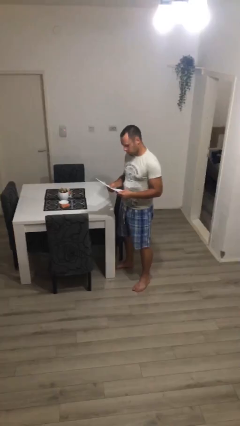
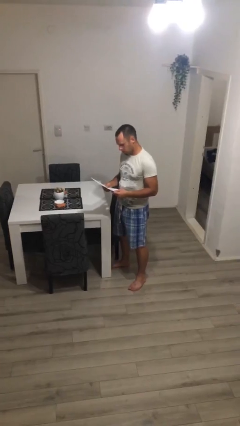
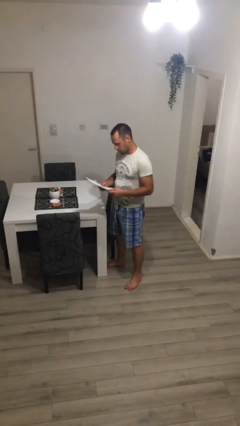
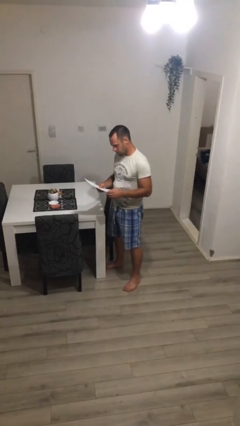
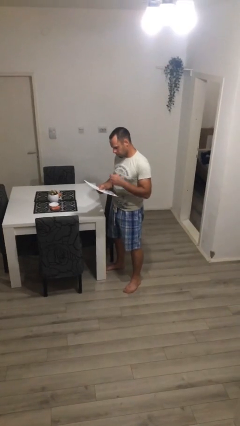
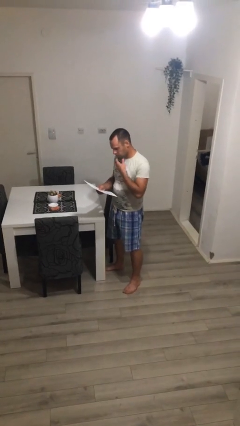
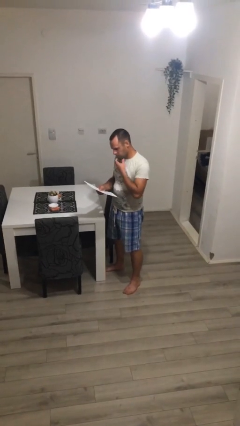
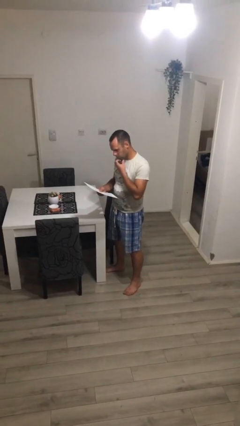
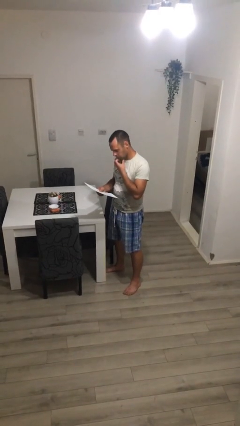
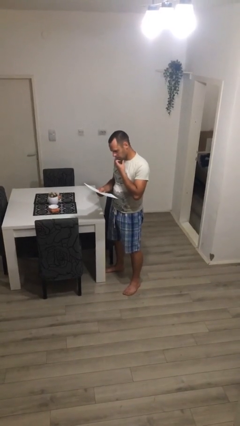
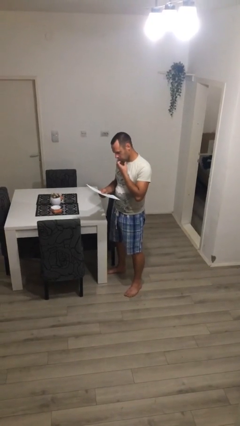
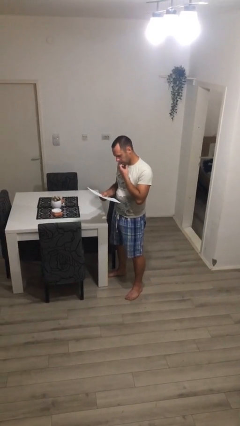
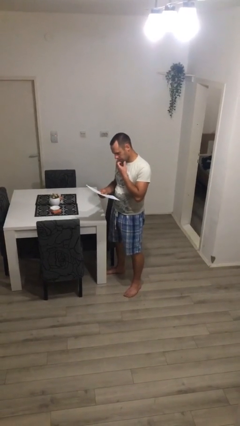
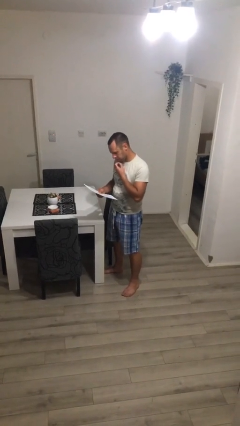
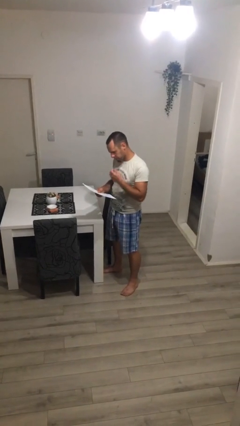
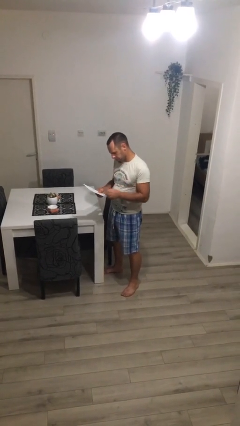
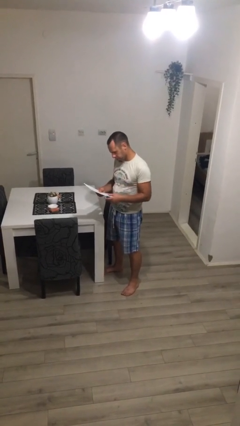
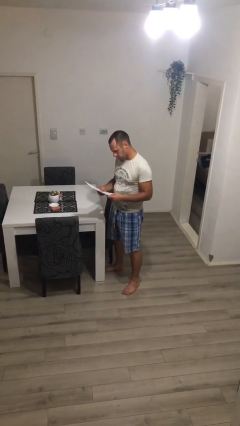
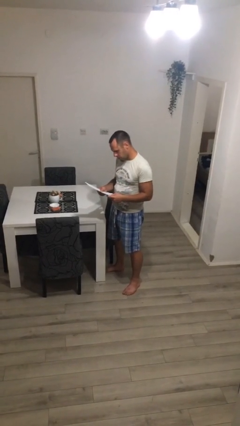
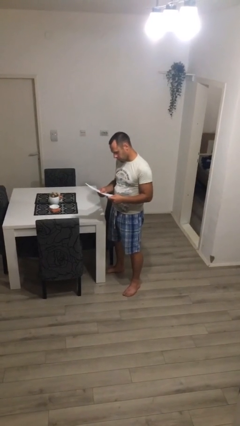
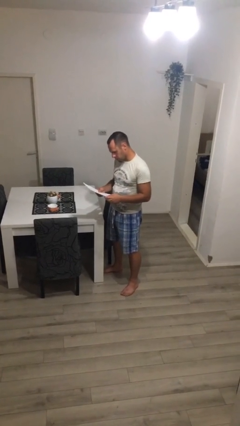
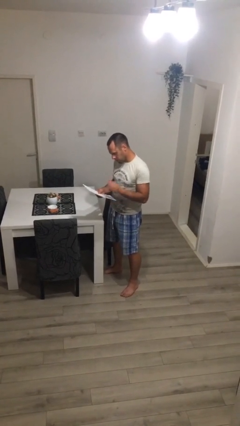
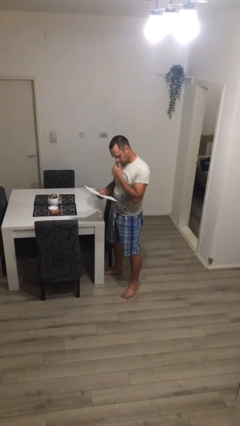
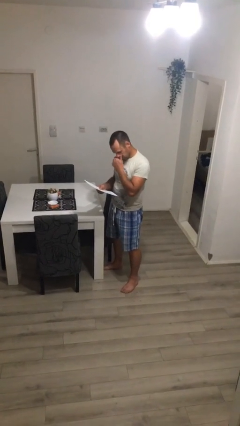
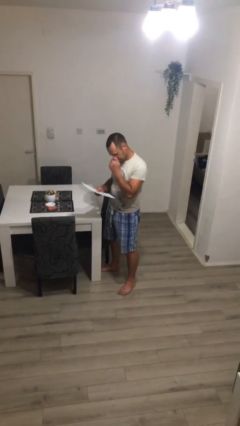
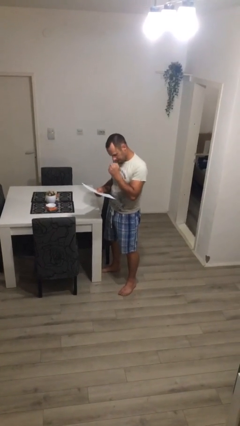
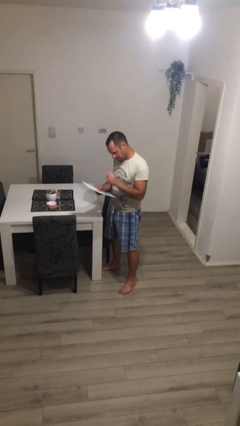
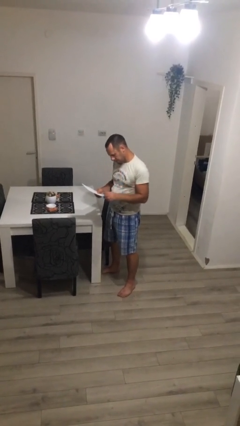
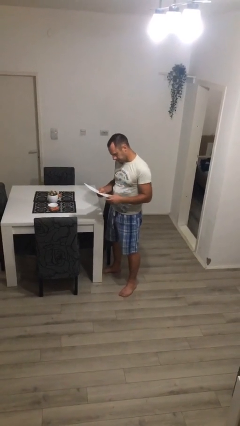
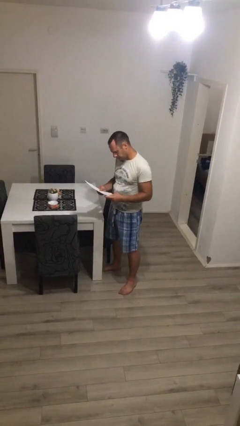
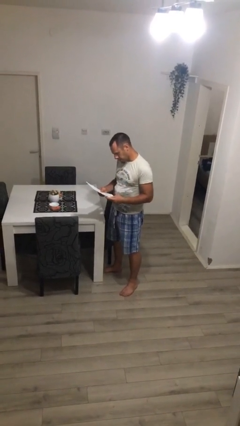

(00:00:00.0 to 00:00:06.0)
person reads document

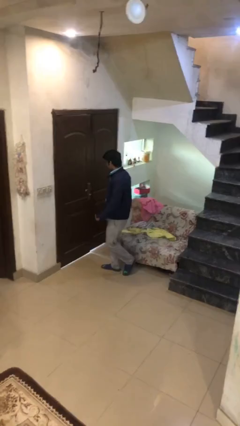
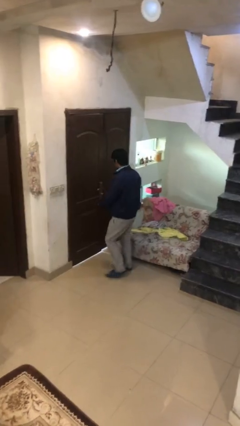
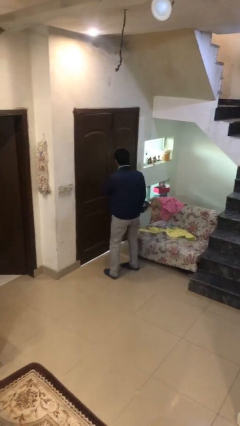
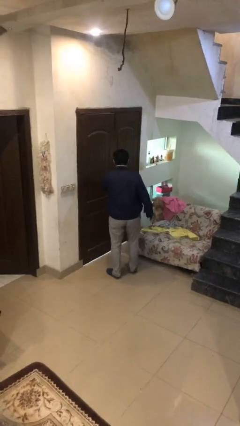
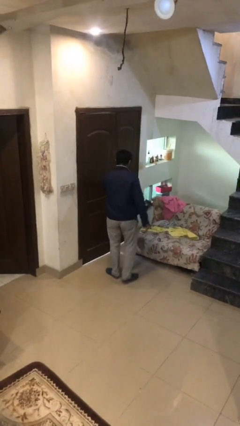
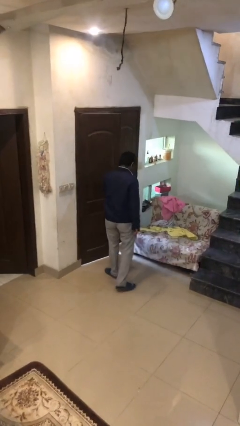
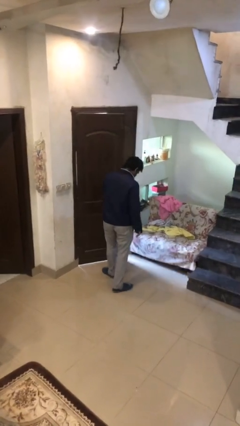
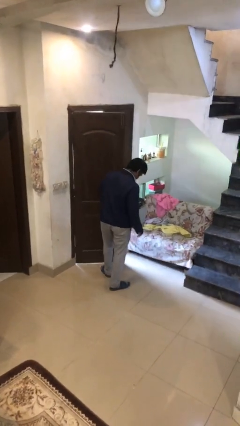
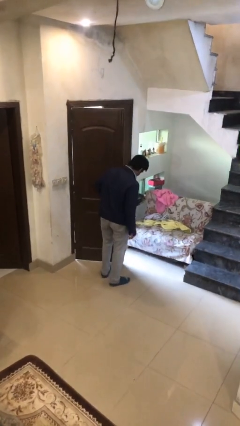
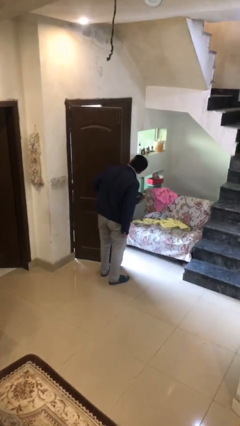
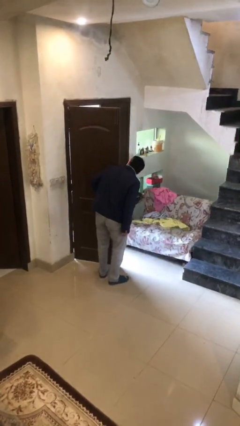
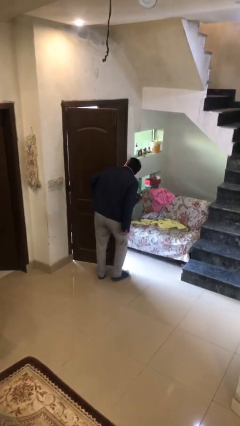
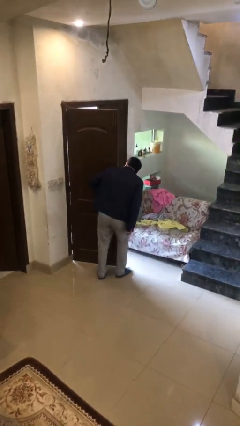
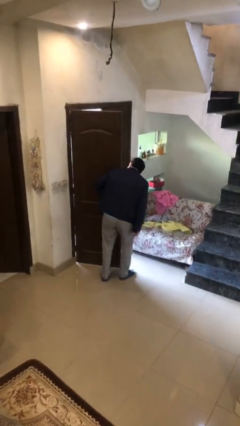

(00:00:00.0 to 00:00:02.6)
person opens facility door

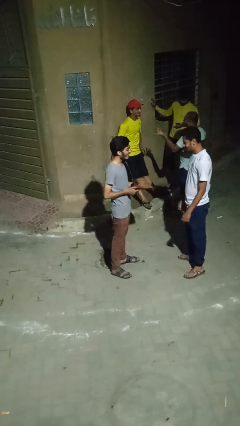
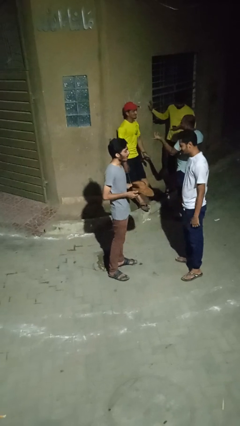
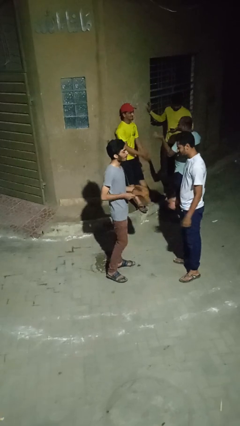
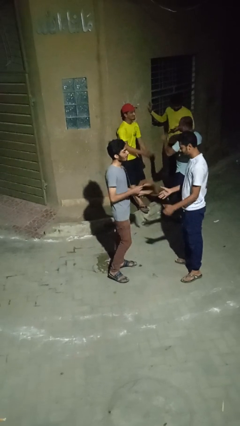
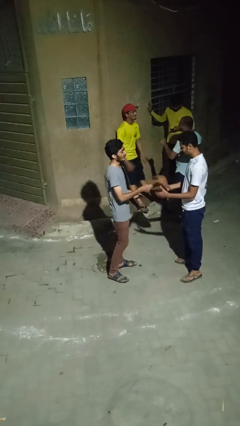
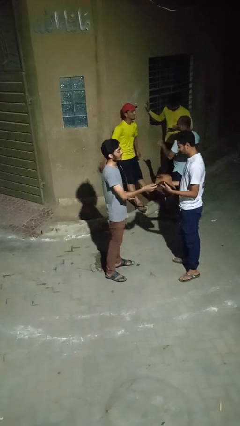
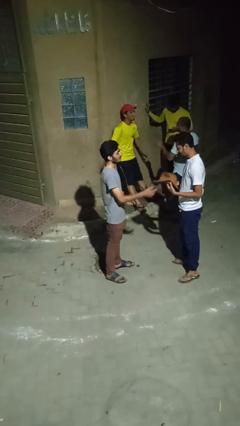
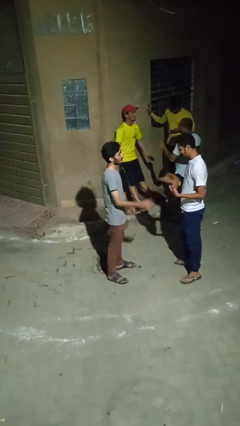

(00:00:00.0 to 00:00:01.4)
person transfers object to person

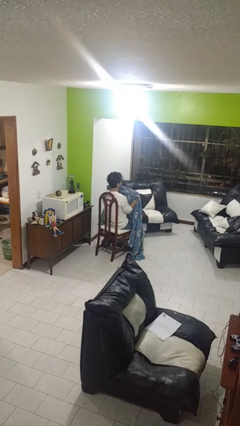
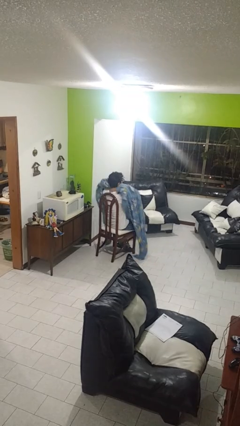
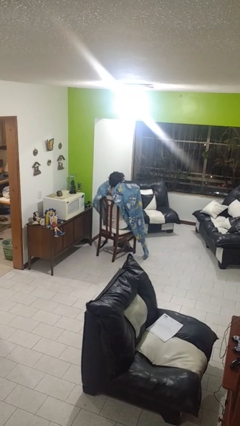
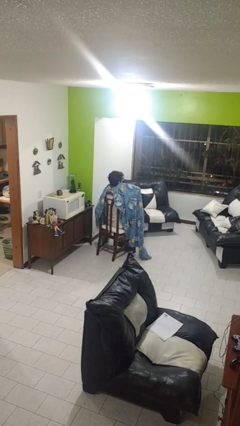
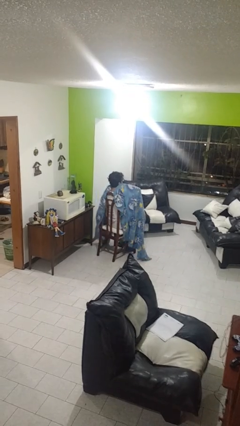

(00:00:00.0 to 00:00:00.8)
person covers with blanket

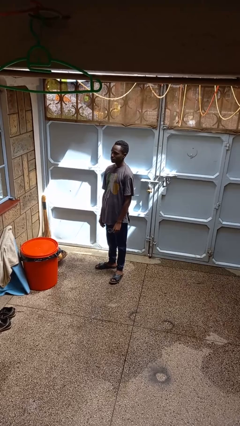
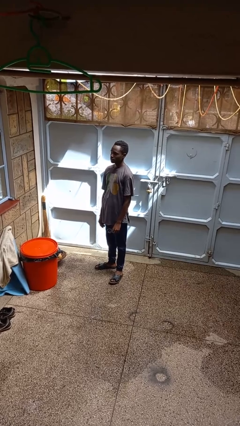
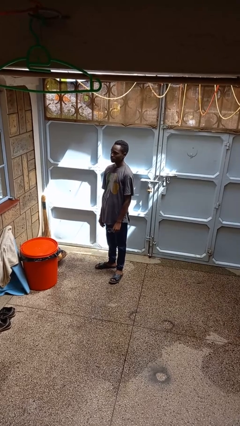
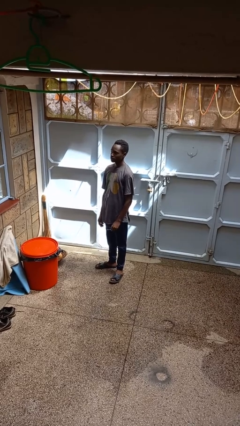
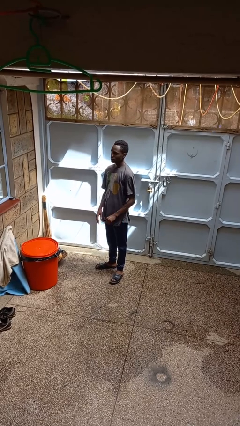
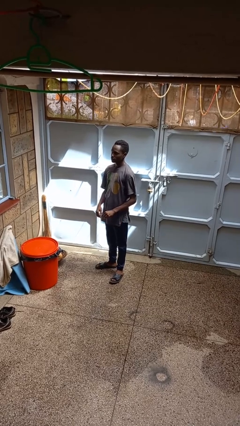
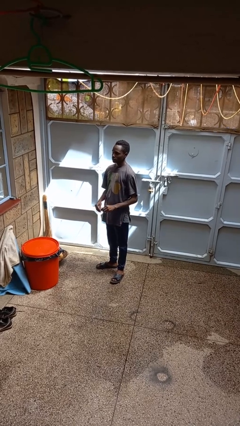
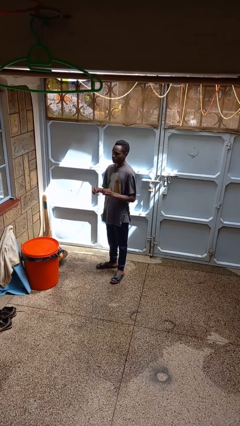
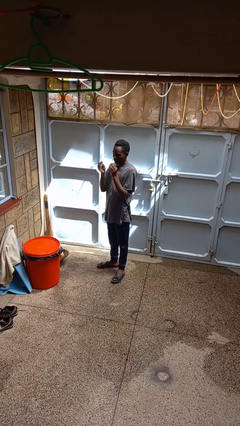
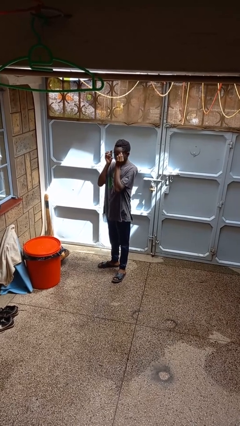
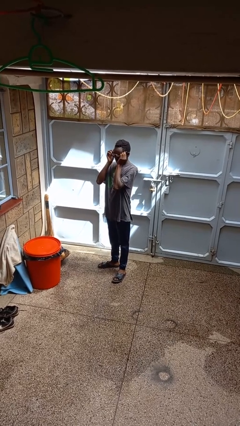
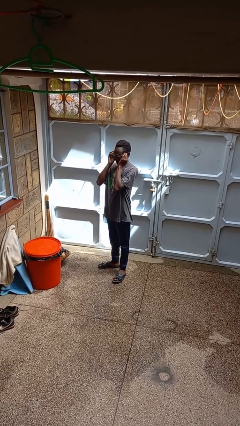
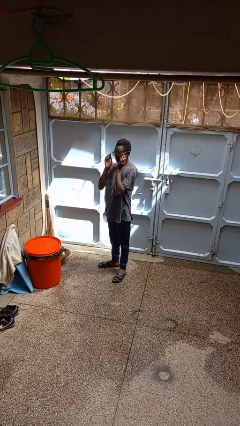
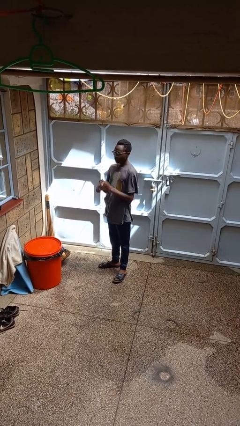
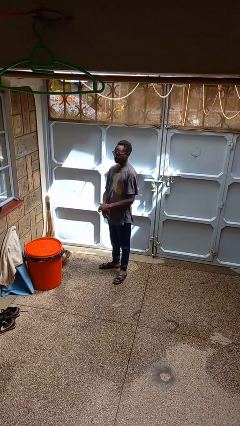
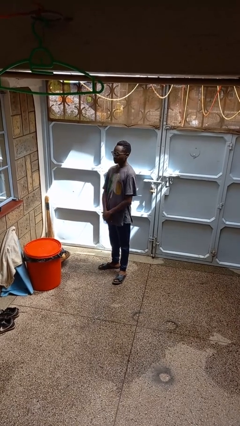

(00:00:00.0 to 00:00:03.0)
person puts on glasses

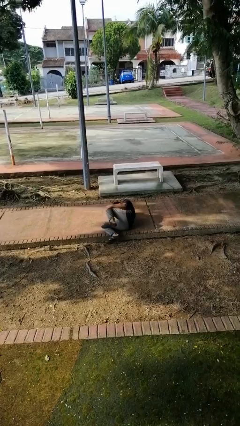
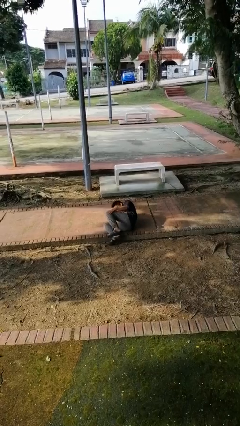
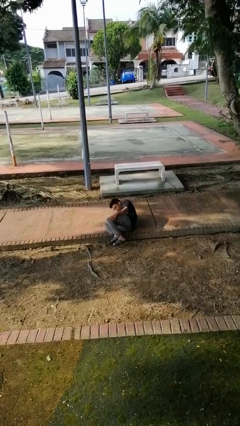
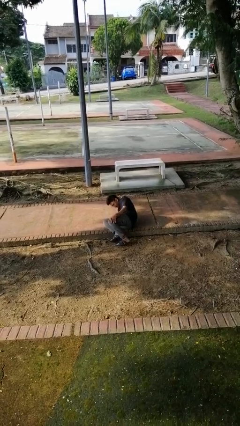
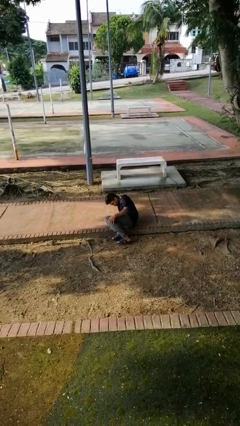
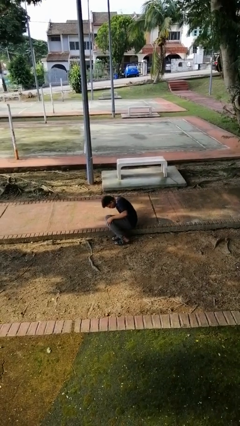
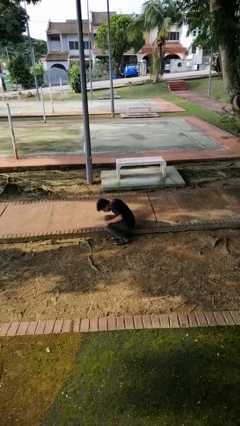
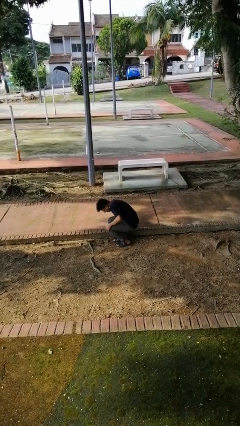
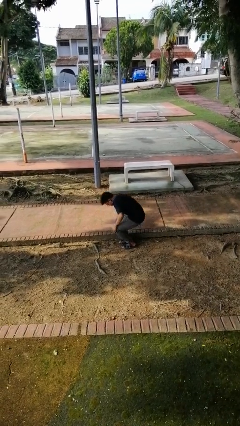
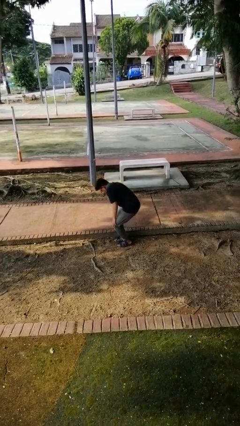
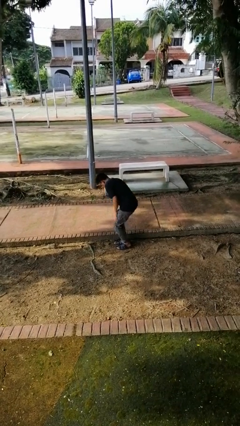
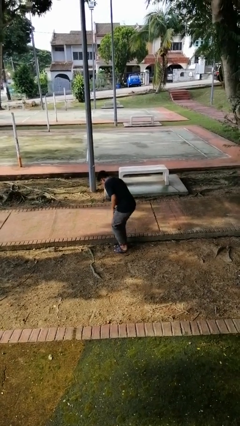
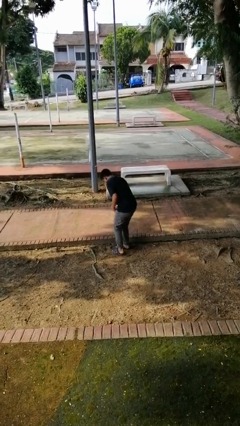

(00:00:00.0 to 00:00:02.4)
person stands up from floor

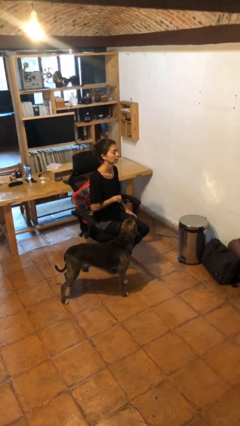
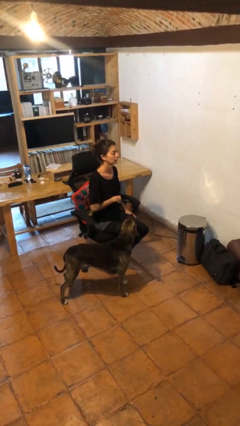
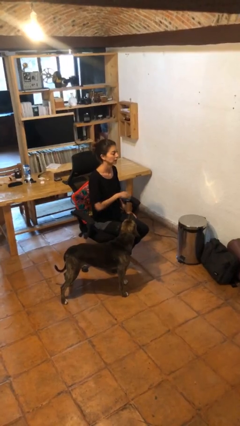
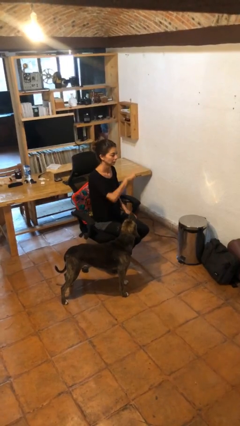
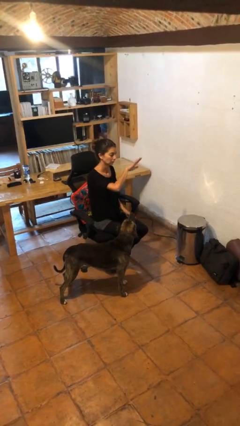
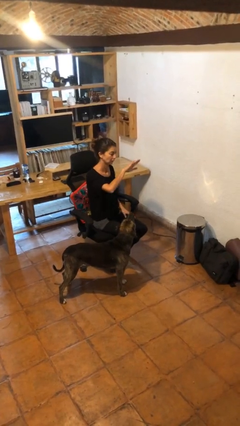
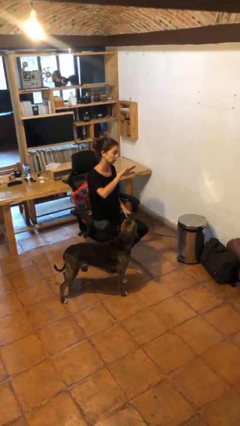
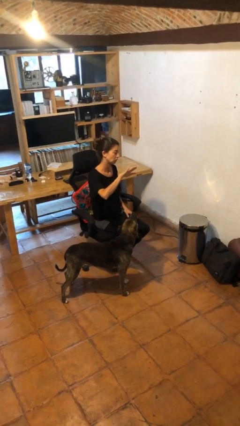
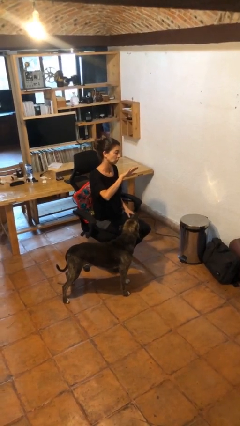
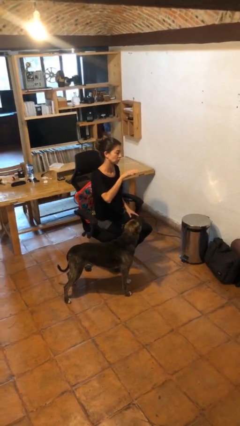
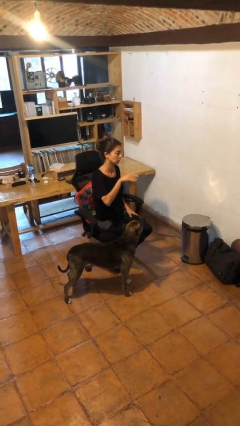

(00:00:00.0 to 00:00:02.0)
person gestures swipe right
